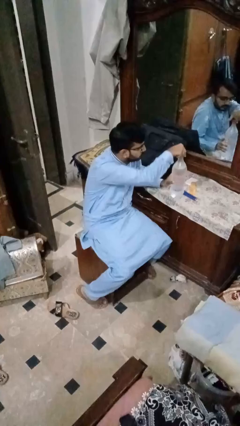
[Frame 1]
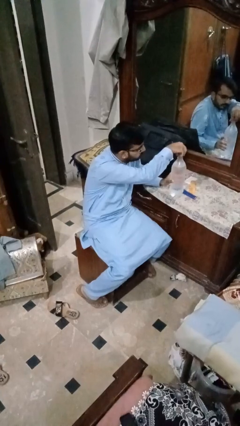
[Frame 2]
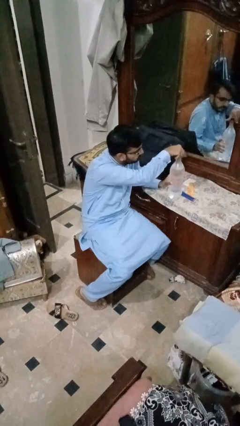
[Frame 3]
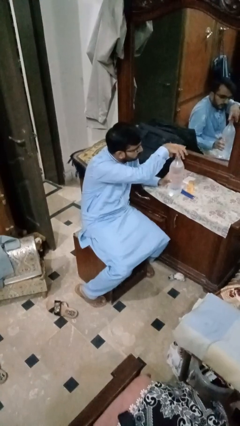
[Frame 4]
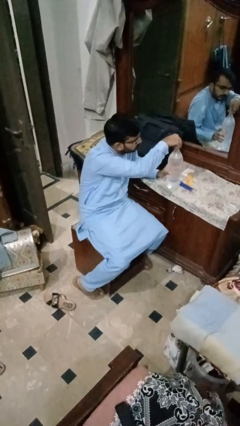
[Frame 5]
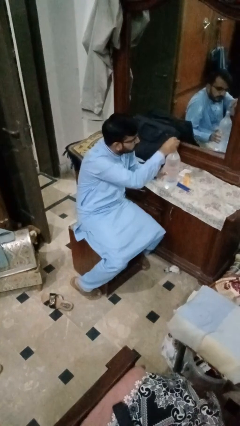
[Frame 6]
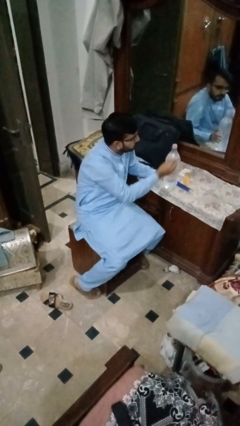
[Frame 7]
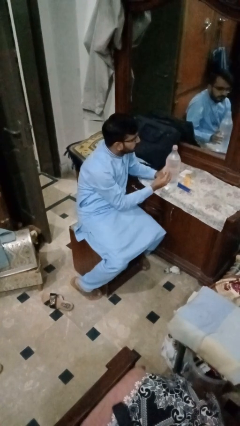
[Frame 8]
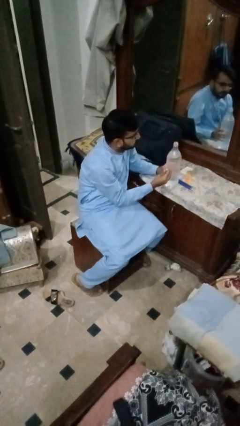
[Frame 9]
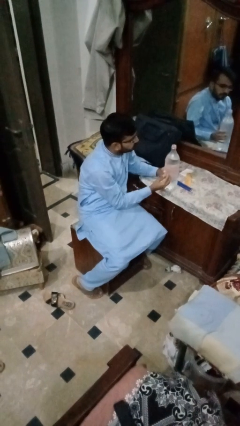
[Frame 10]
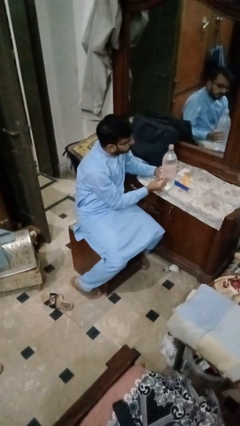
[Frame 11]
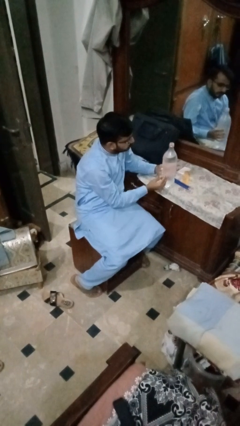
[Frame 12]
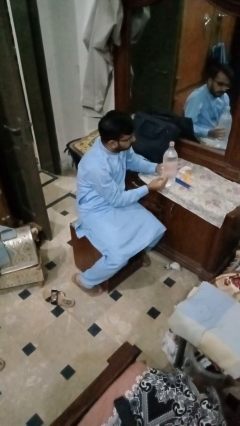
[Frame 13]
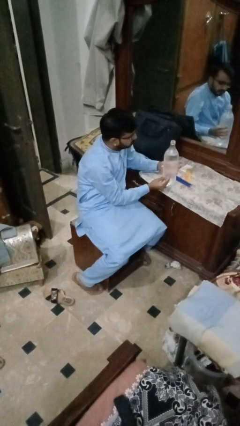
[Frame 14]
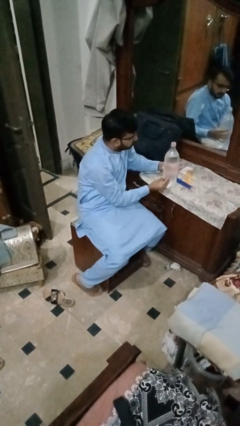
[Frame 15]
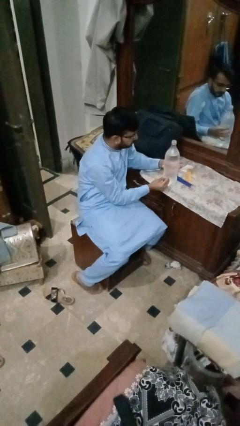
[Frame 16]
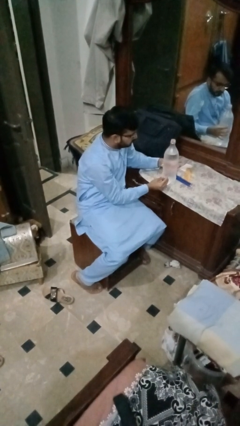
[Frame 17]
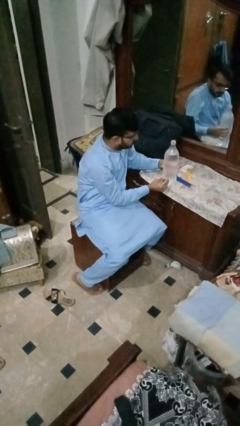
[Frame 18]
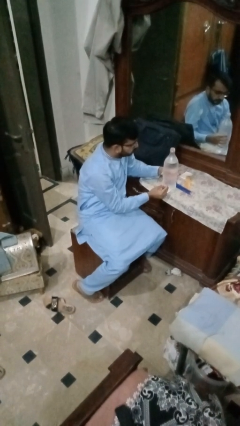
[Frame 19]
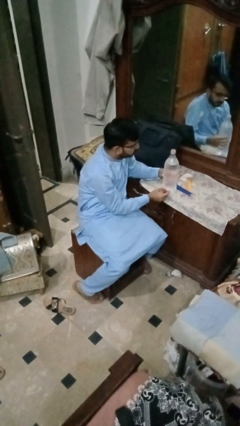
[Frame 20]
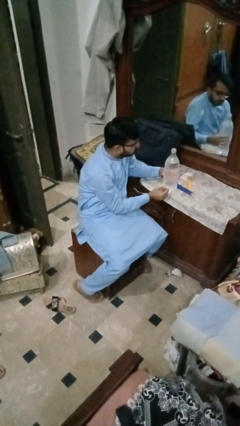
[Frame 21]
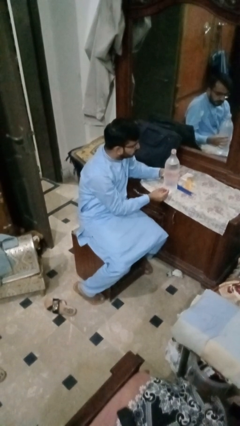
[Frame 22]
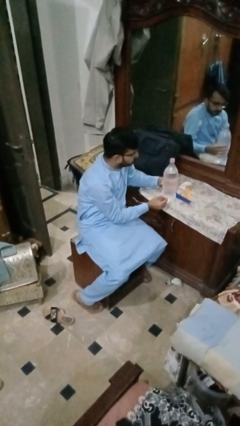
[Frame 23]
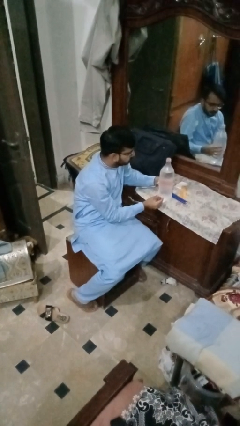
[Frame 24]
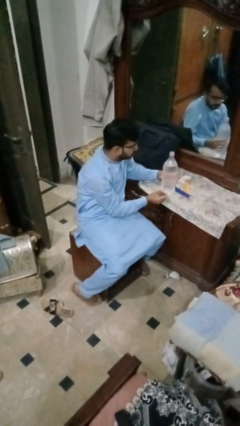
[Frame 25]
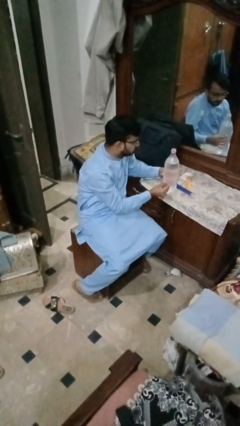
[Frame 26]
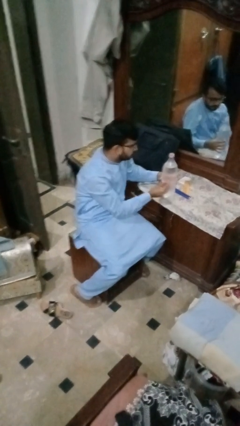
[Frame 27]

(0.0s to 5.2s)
person unscrews lid from bottle

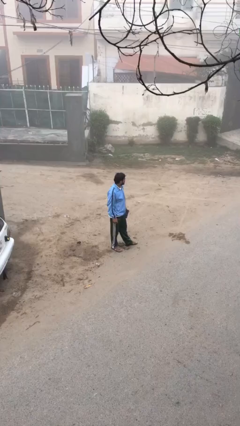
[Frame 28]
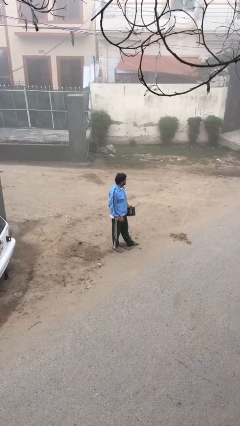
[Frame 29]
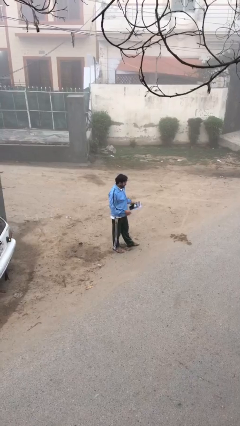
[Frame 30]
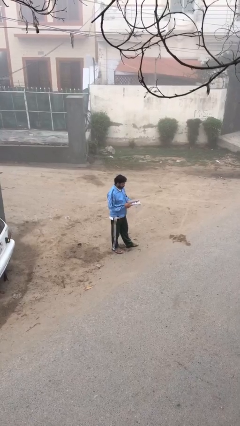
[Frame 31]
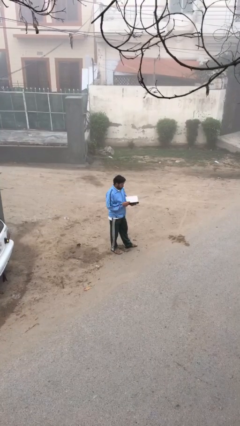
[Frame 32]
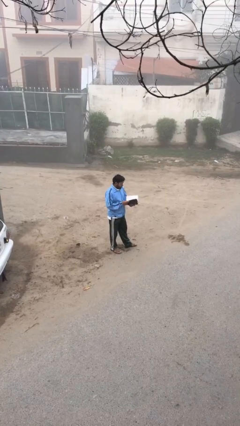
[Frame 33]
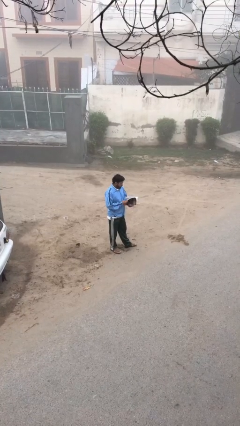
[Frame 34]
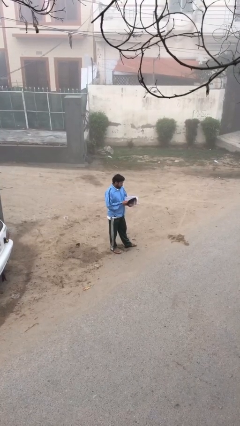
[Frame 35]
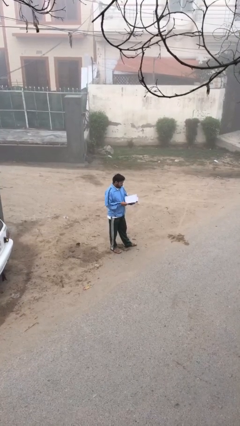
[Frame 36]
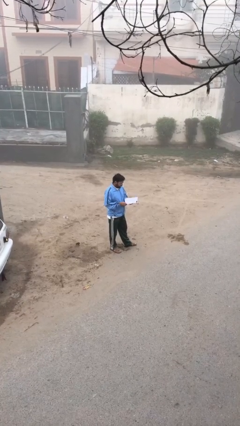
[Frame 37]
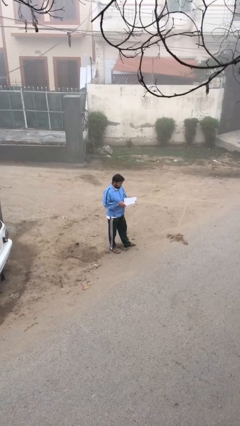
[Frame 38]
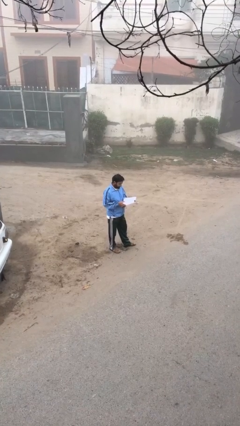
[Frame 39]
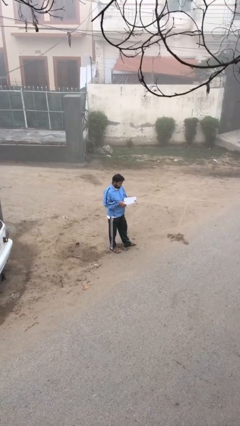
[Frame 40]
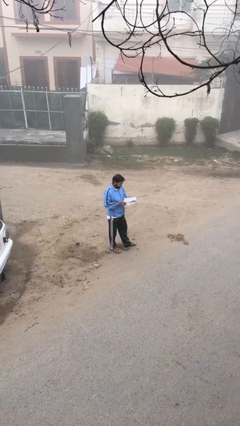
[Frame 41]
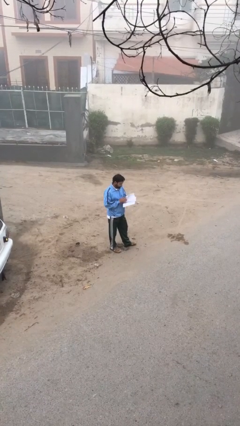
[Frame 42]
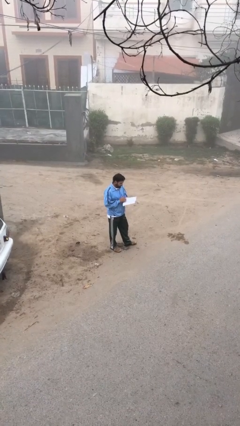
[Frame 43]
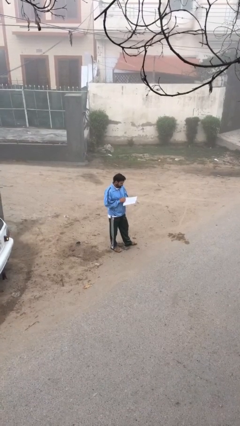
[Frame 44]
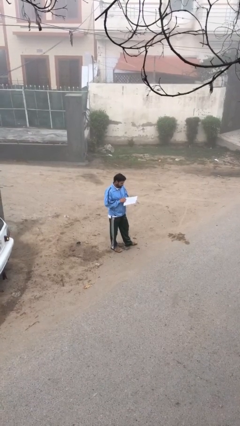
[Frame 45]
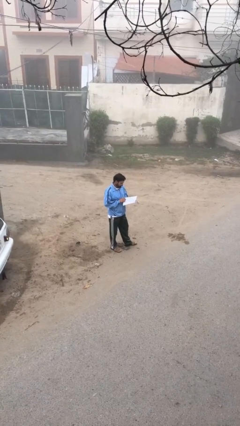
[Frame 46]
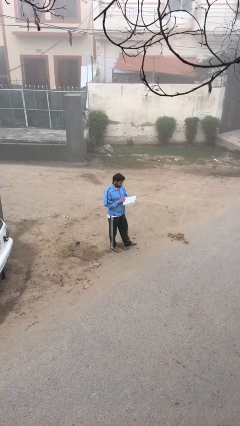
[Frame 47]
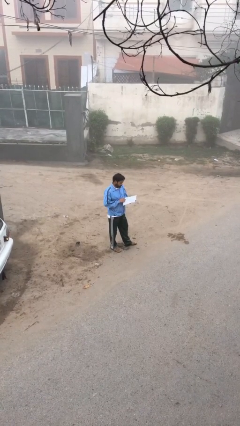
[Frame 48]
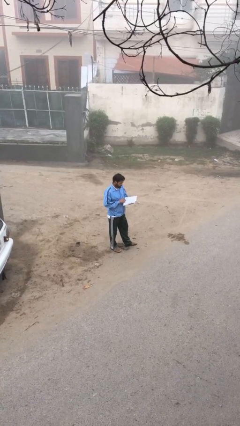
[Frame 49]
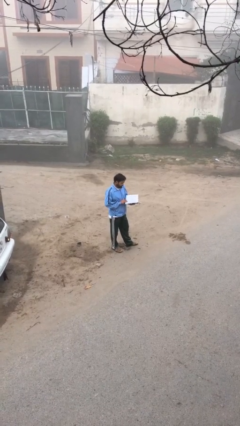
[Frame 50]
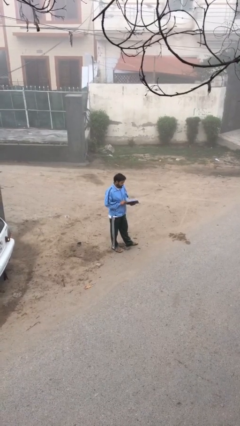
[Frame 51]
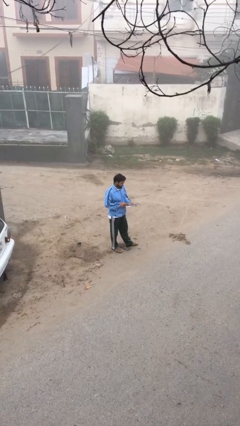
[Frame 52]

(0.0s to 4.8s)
person reads document

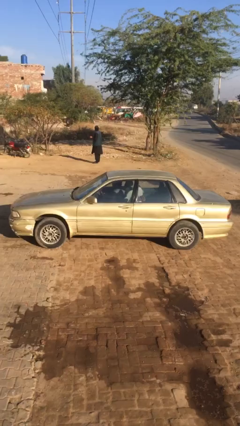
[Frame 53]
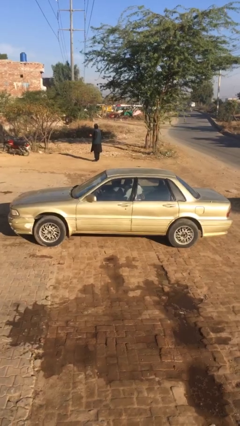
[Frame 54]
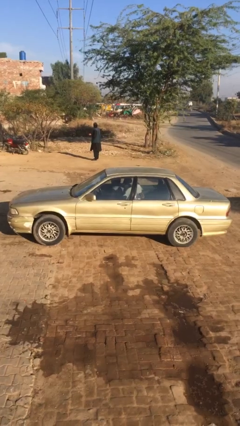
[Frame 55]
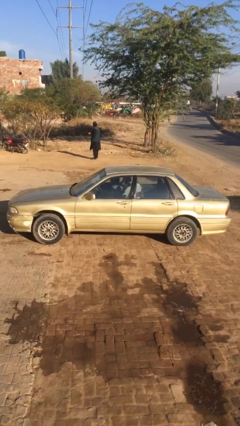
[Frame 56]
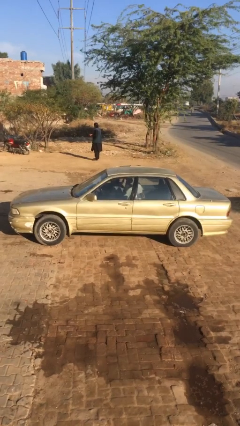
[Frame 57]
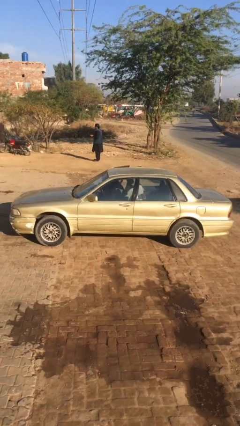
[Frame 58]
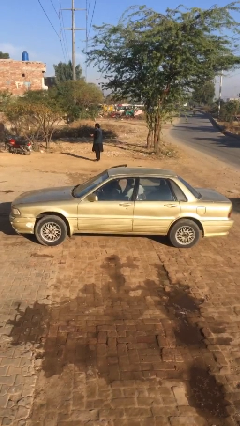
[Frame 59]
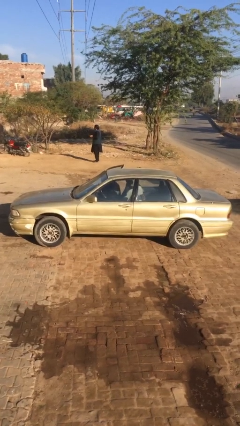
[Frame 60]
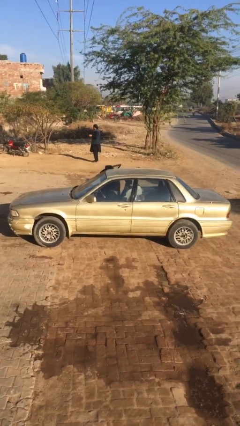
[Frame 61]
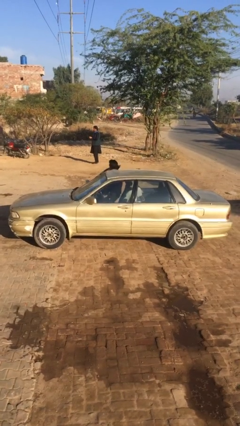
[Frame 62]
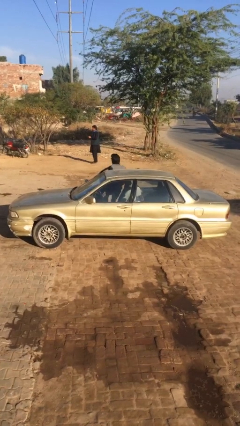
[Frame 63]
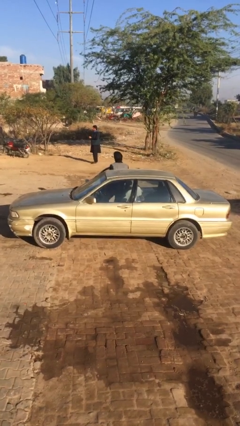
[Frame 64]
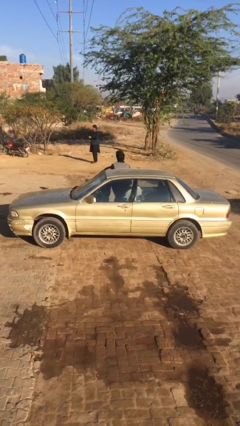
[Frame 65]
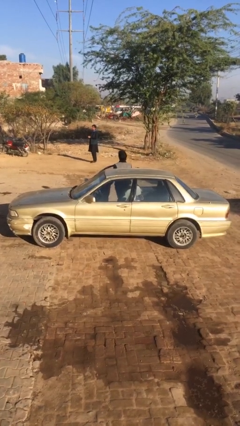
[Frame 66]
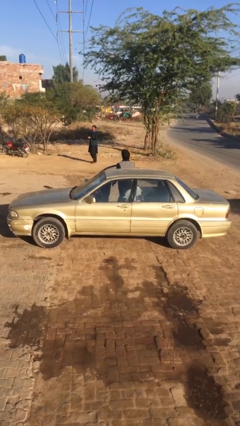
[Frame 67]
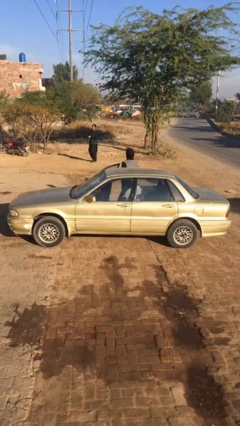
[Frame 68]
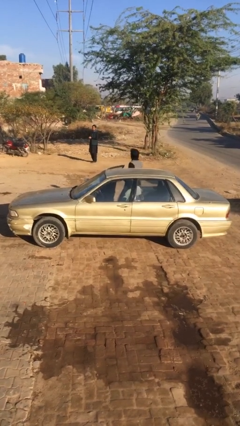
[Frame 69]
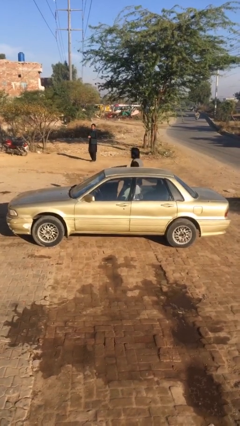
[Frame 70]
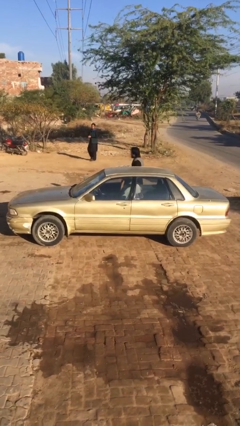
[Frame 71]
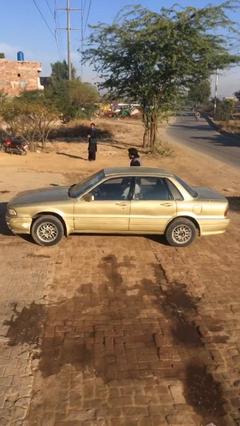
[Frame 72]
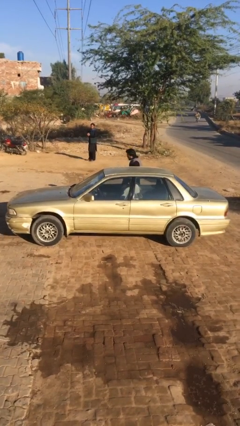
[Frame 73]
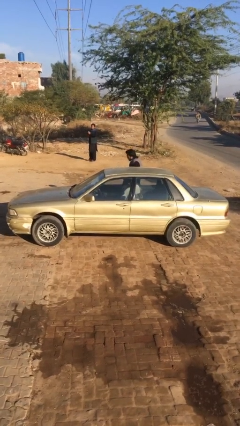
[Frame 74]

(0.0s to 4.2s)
car drops off person

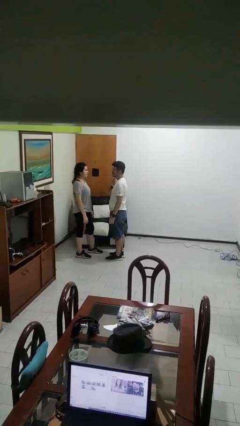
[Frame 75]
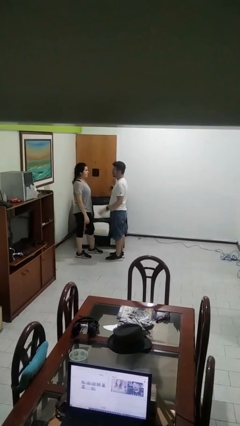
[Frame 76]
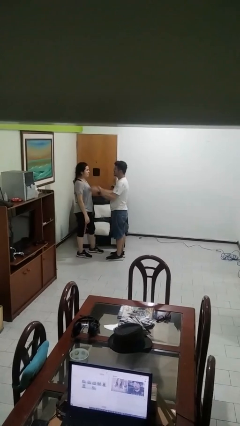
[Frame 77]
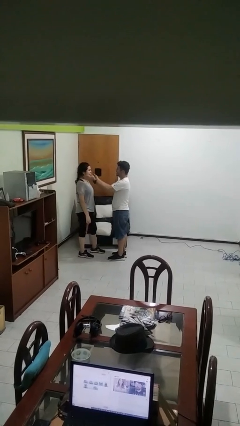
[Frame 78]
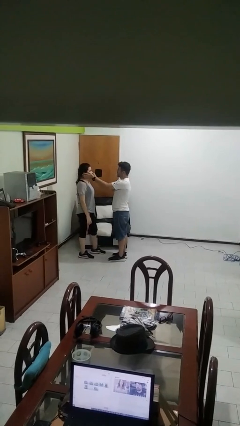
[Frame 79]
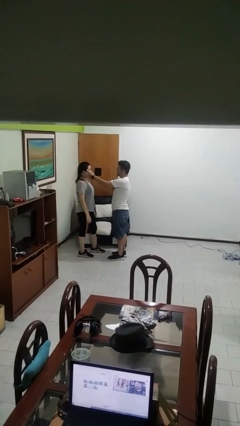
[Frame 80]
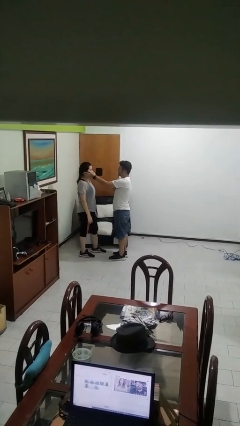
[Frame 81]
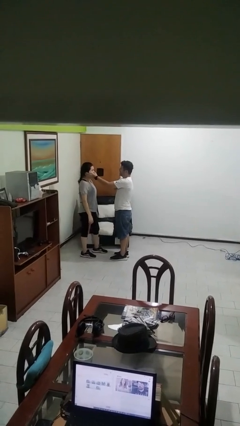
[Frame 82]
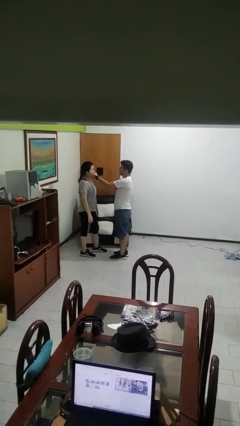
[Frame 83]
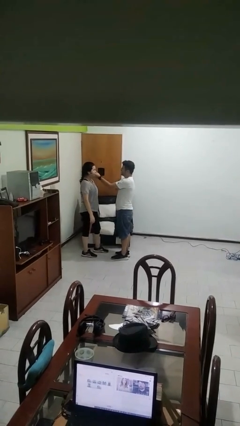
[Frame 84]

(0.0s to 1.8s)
person touches face of person

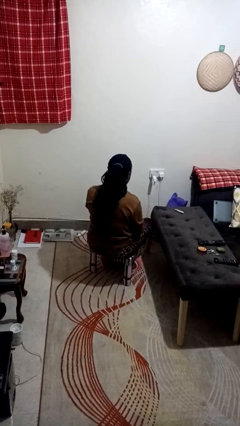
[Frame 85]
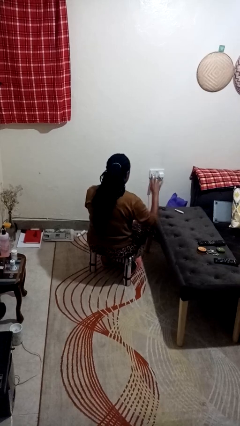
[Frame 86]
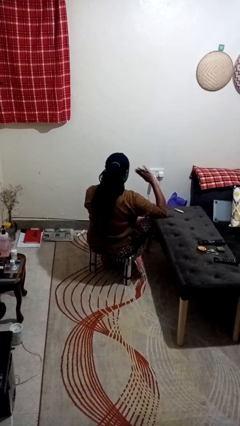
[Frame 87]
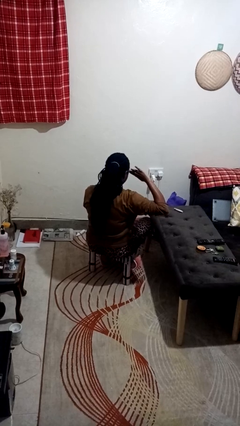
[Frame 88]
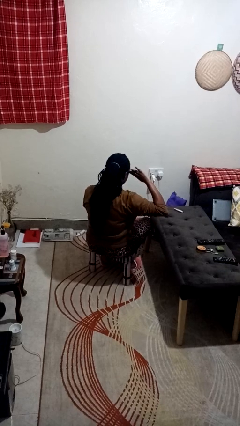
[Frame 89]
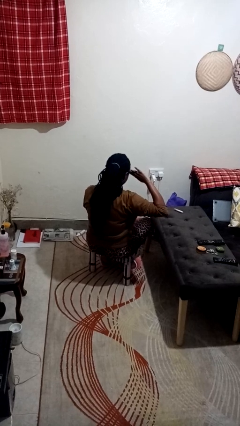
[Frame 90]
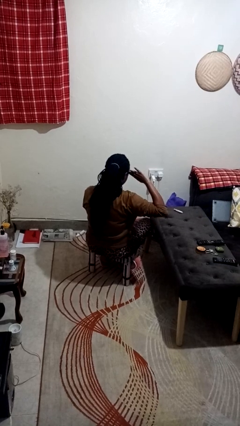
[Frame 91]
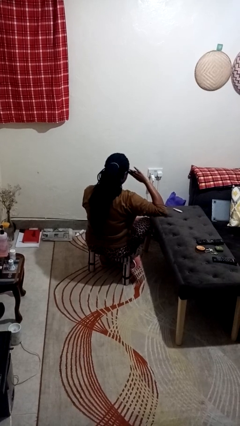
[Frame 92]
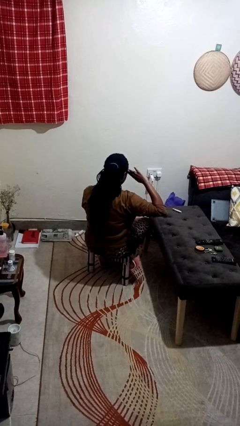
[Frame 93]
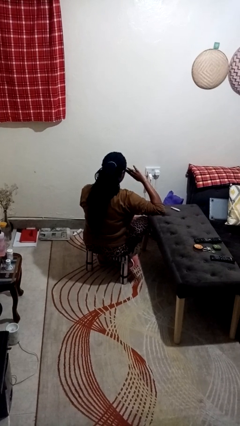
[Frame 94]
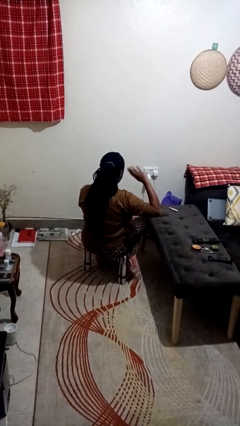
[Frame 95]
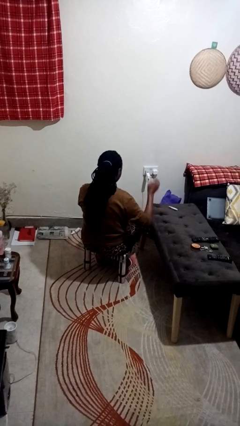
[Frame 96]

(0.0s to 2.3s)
person salutes
